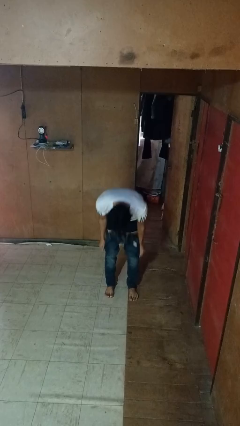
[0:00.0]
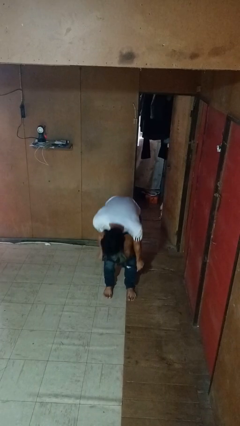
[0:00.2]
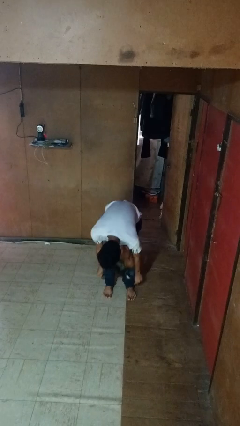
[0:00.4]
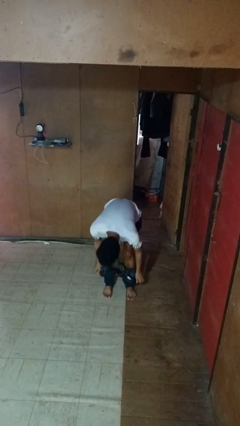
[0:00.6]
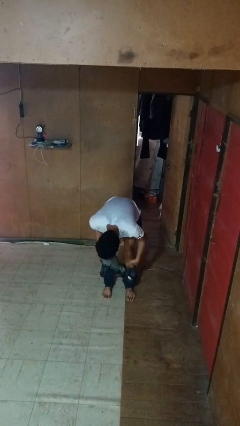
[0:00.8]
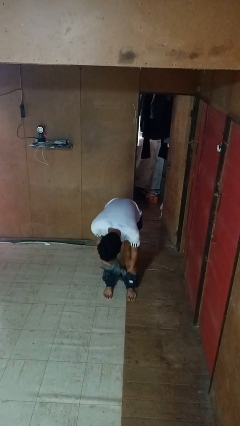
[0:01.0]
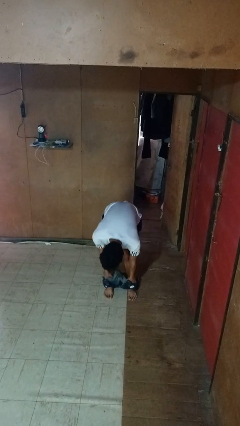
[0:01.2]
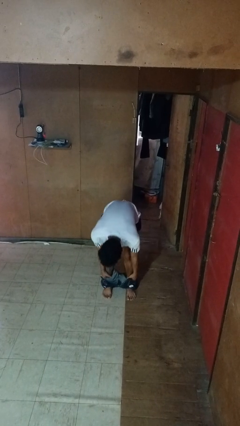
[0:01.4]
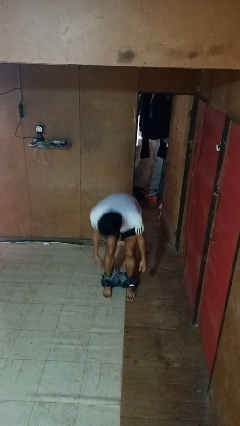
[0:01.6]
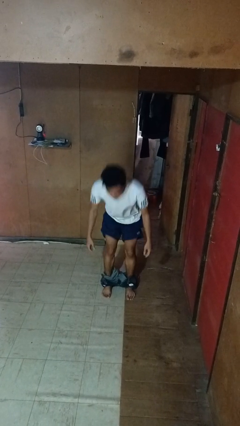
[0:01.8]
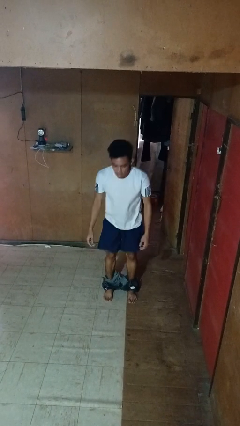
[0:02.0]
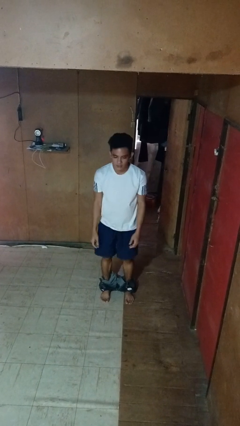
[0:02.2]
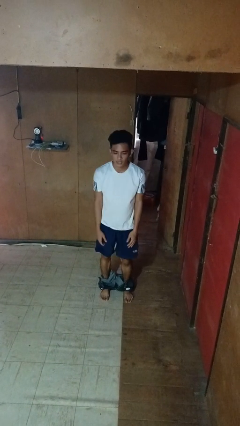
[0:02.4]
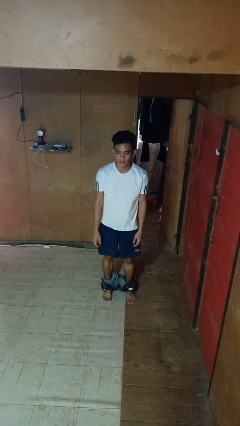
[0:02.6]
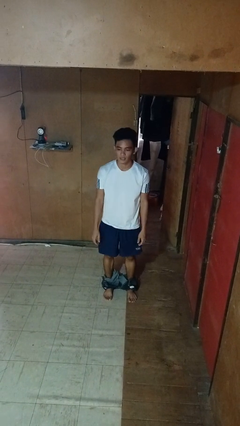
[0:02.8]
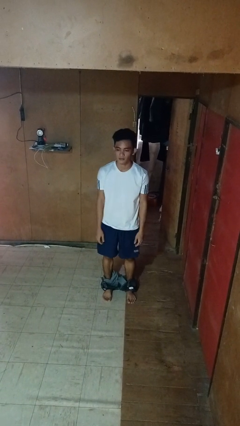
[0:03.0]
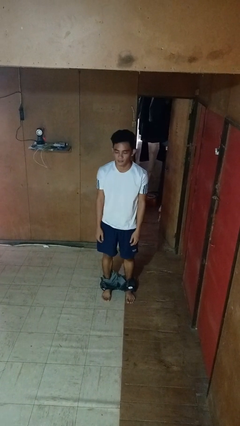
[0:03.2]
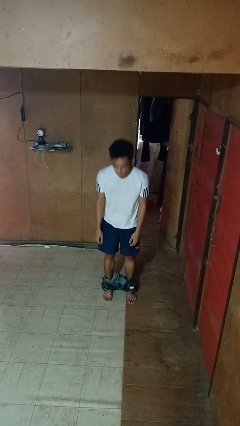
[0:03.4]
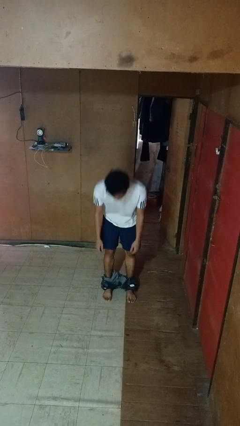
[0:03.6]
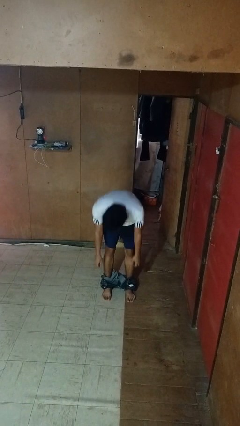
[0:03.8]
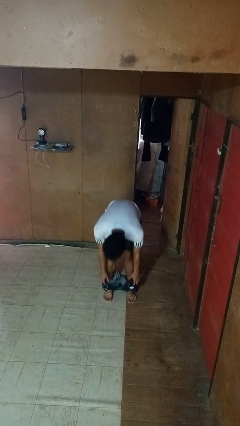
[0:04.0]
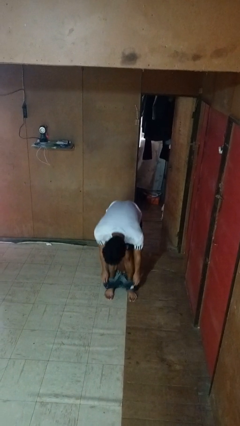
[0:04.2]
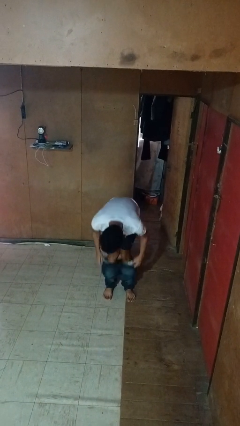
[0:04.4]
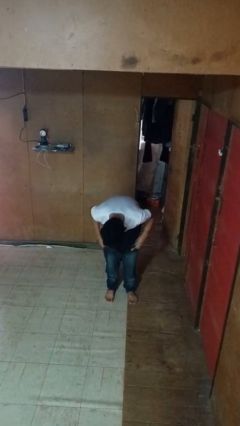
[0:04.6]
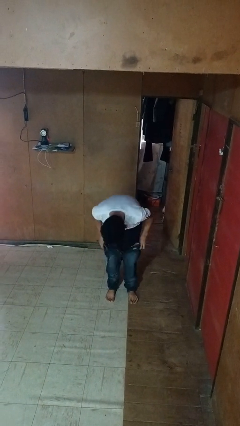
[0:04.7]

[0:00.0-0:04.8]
person takes off pants

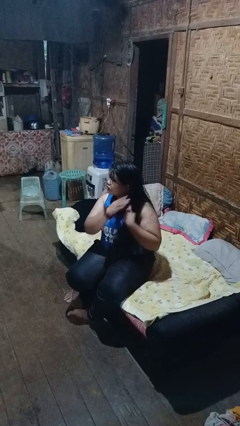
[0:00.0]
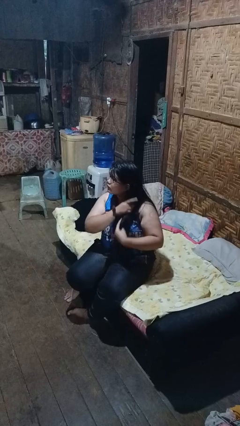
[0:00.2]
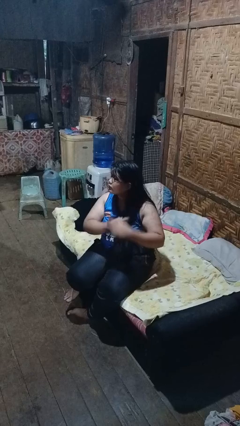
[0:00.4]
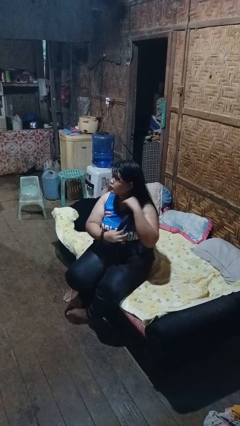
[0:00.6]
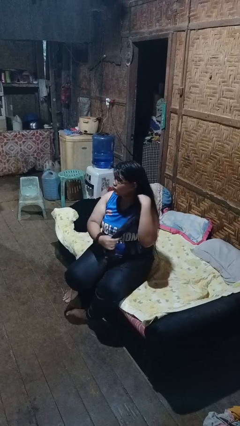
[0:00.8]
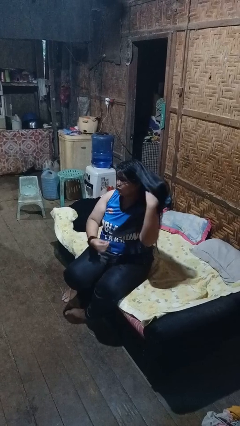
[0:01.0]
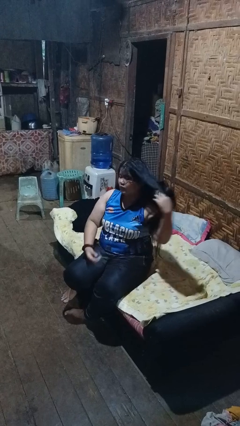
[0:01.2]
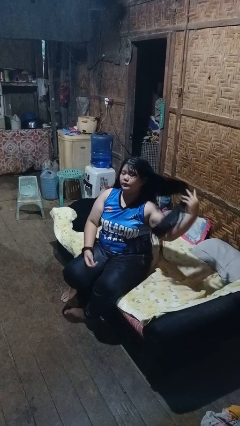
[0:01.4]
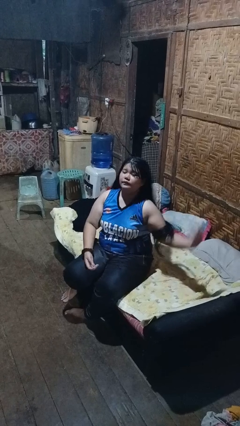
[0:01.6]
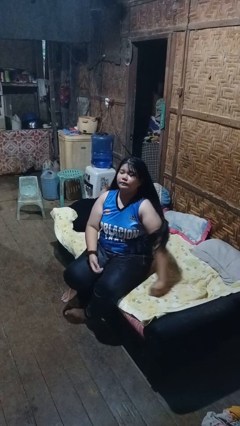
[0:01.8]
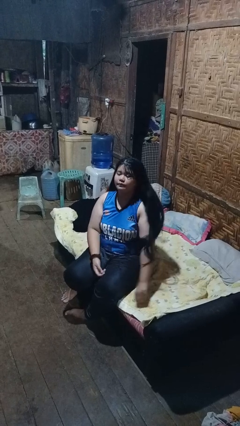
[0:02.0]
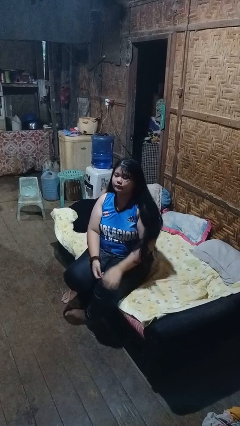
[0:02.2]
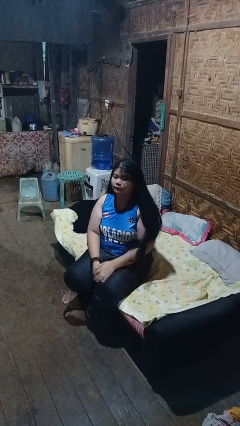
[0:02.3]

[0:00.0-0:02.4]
person strokes hair

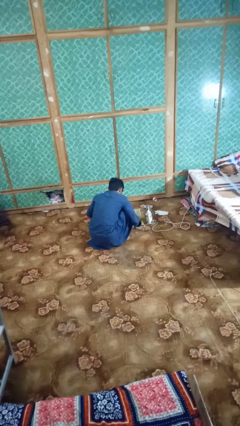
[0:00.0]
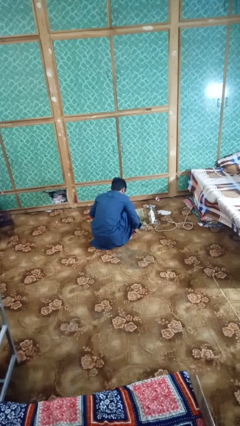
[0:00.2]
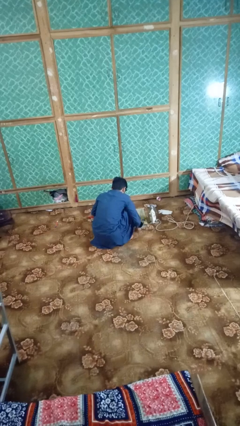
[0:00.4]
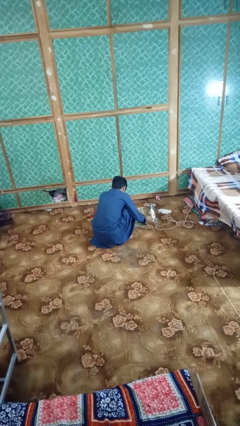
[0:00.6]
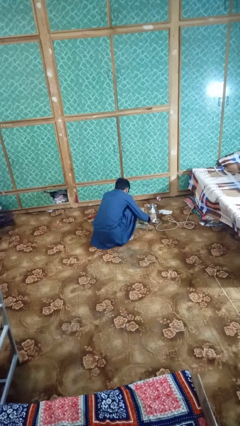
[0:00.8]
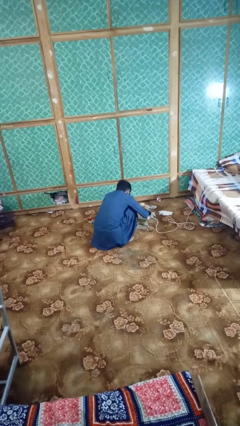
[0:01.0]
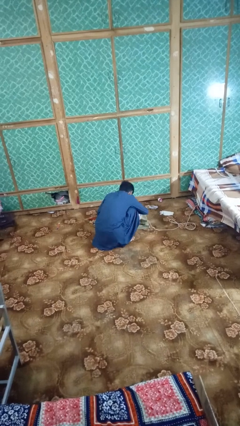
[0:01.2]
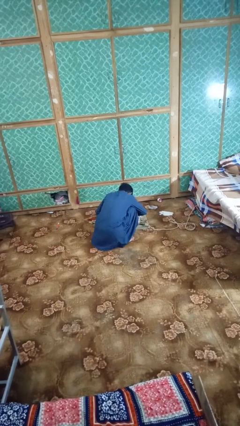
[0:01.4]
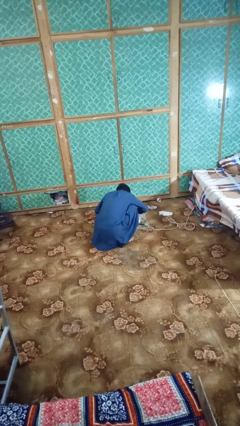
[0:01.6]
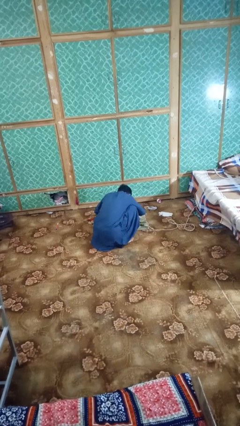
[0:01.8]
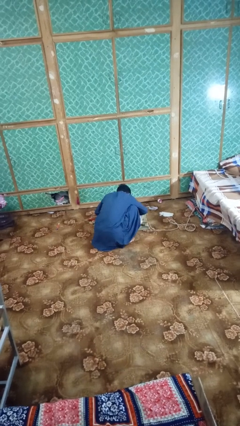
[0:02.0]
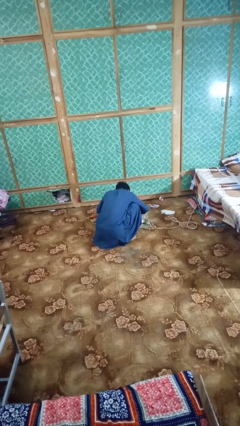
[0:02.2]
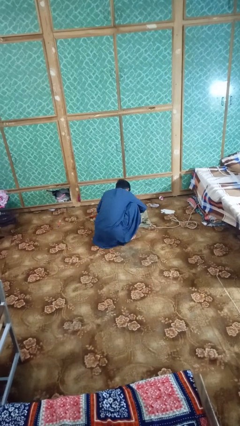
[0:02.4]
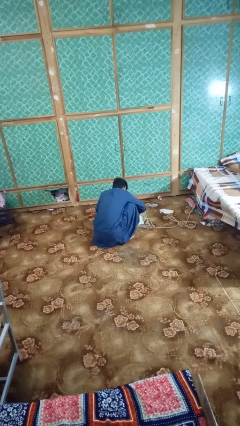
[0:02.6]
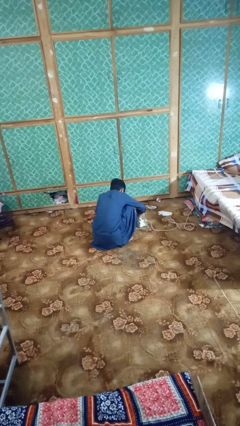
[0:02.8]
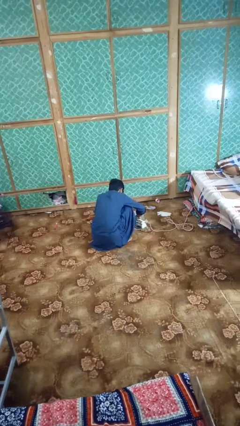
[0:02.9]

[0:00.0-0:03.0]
person irons clothes

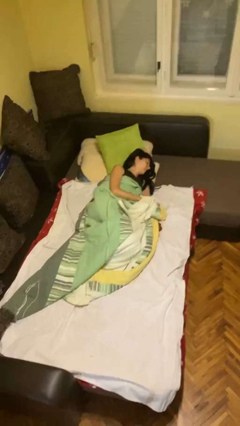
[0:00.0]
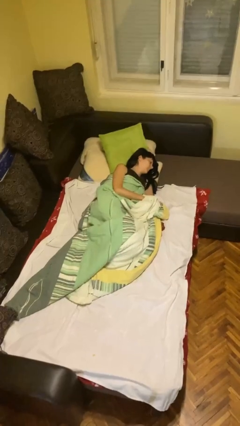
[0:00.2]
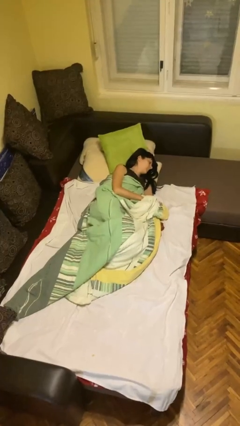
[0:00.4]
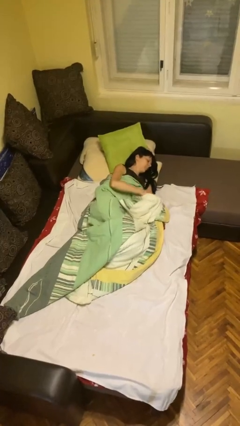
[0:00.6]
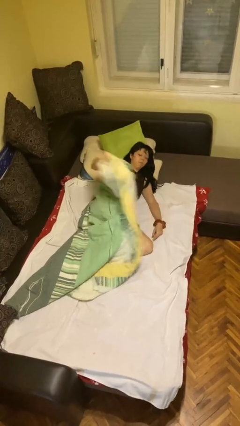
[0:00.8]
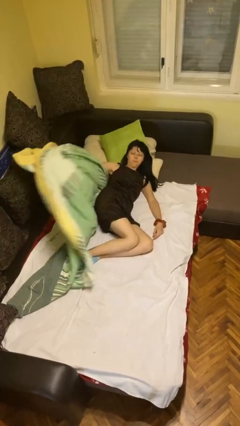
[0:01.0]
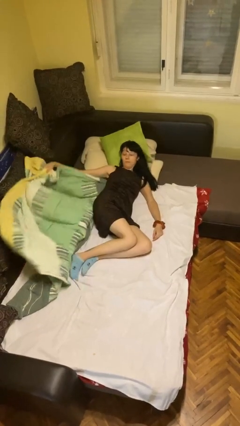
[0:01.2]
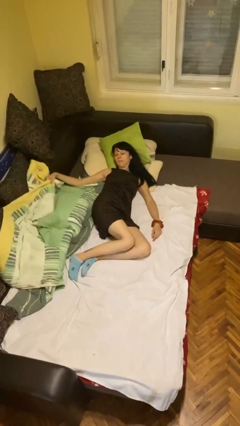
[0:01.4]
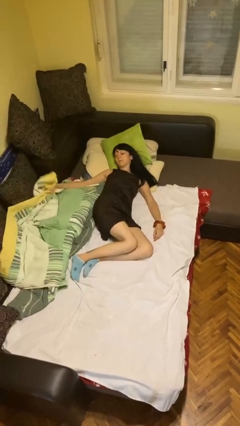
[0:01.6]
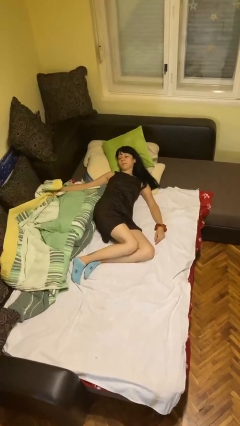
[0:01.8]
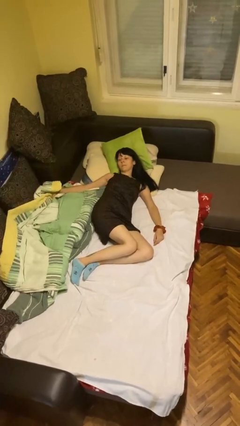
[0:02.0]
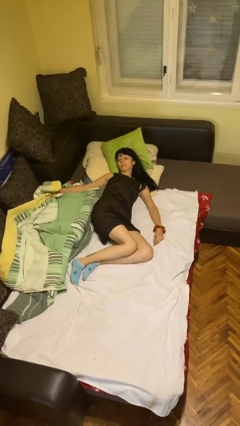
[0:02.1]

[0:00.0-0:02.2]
person uncovers with bedsheets

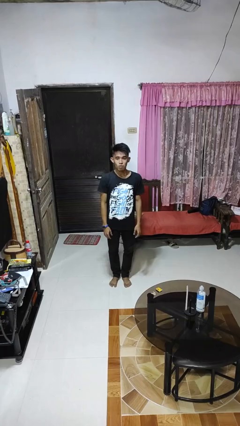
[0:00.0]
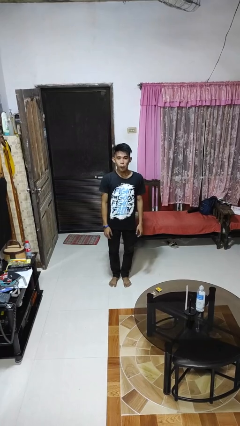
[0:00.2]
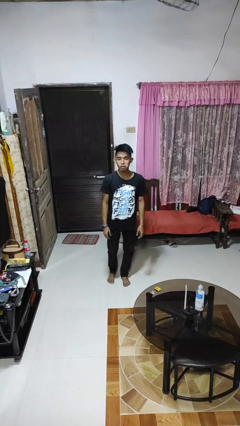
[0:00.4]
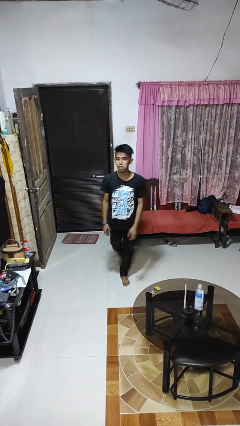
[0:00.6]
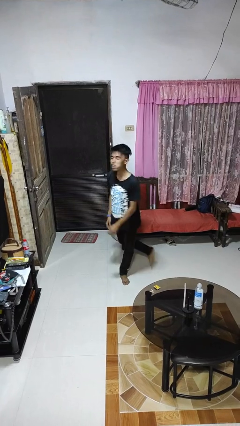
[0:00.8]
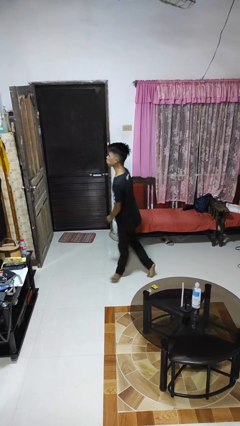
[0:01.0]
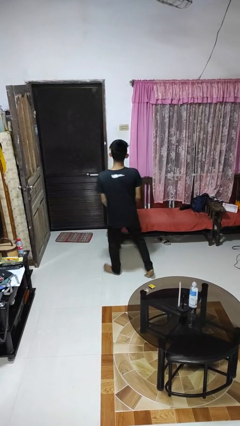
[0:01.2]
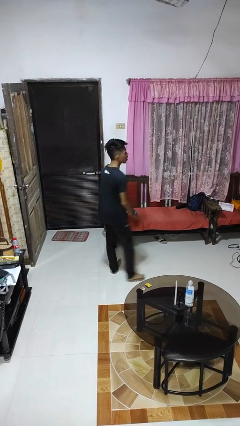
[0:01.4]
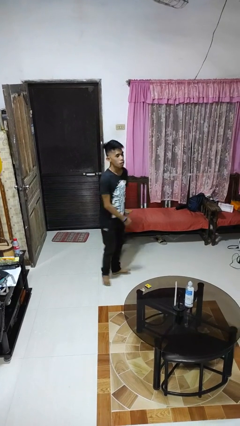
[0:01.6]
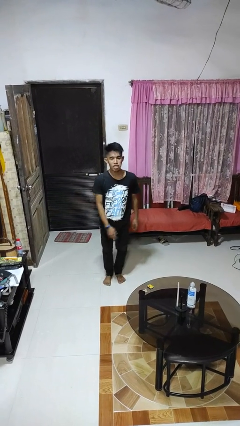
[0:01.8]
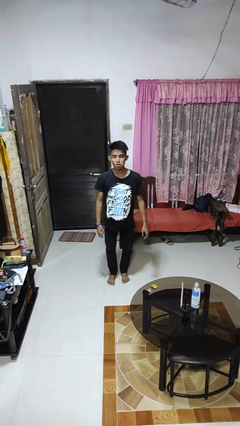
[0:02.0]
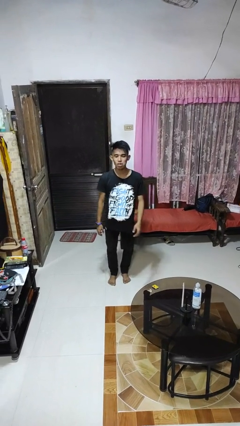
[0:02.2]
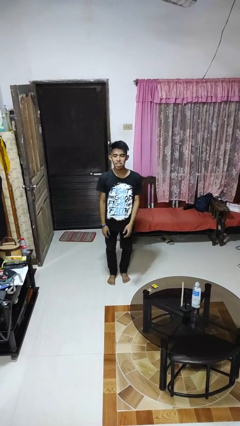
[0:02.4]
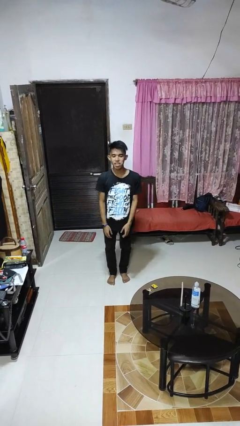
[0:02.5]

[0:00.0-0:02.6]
person twirls

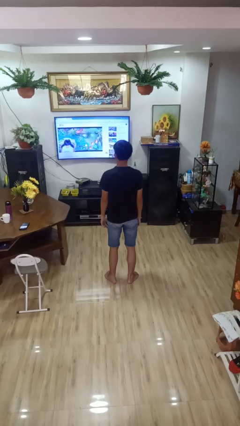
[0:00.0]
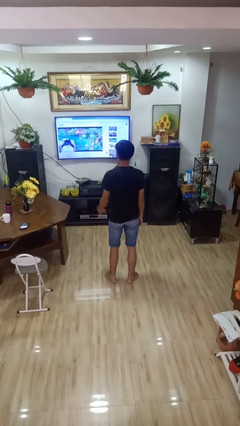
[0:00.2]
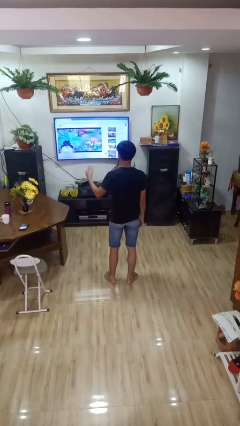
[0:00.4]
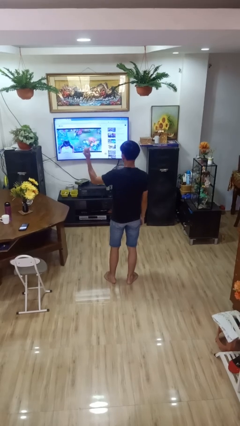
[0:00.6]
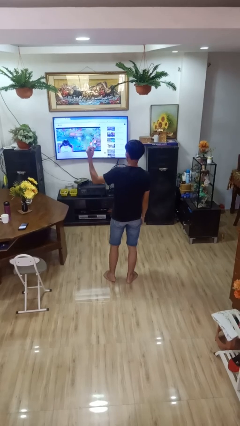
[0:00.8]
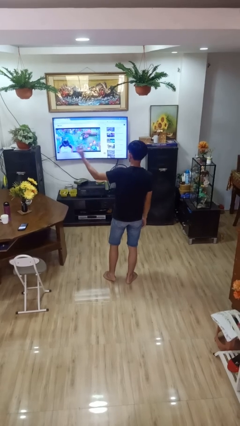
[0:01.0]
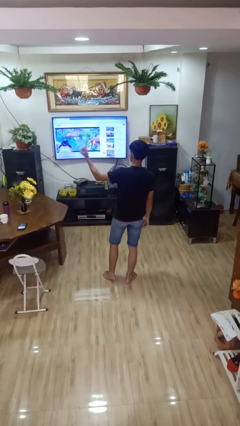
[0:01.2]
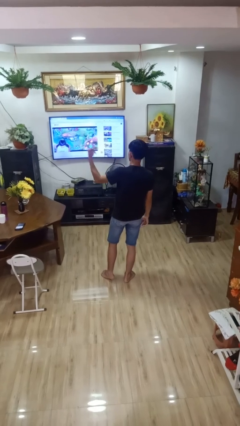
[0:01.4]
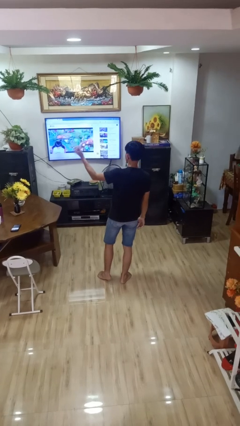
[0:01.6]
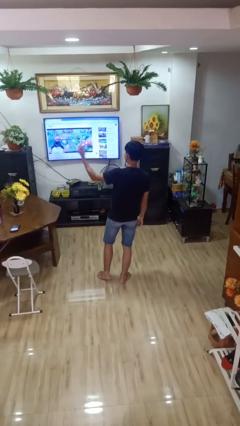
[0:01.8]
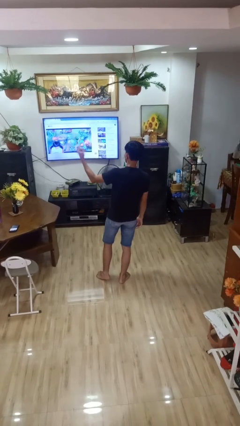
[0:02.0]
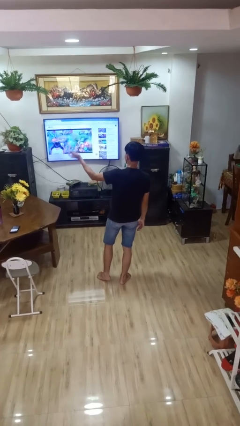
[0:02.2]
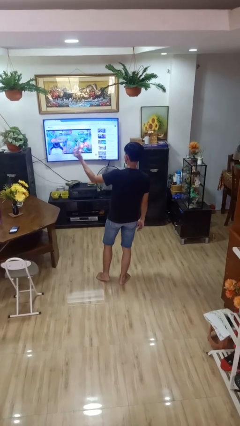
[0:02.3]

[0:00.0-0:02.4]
person snaps fingers
